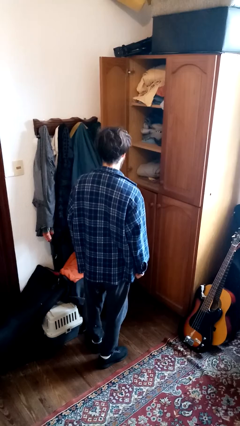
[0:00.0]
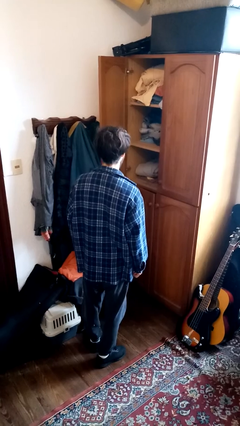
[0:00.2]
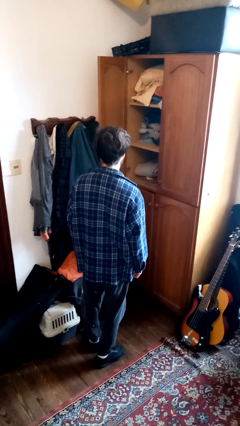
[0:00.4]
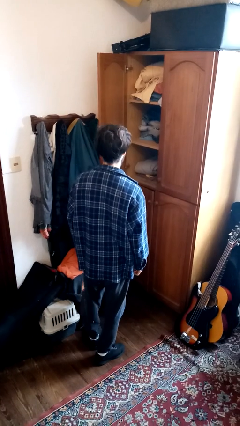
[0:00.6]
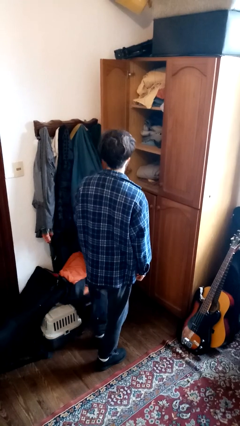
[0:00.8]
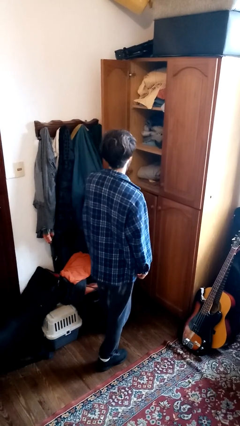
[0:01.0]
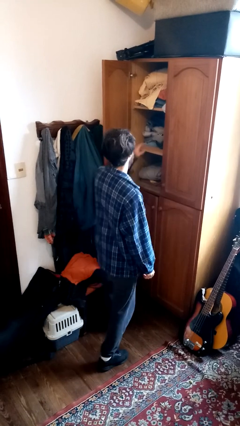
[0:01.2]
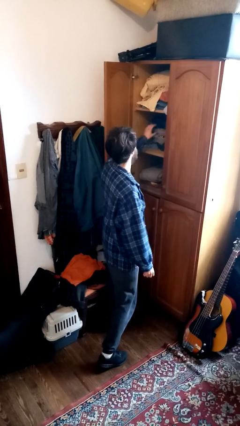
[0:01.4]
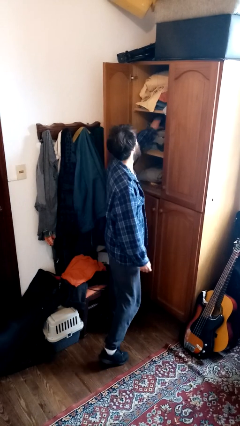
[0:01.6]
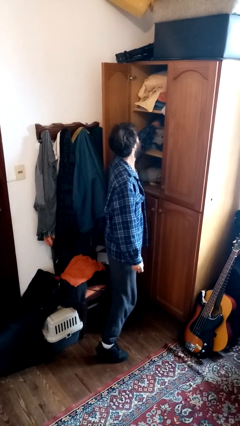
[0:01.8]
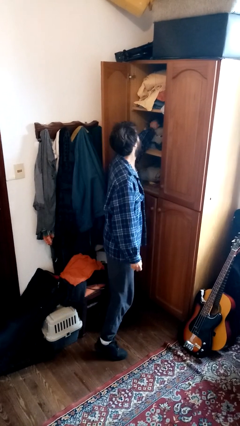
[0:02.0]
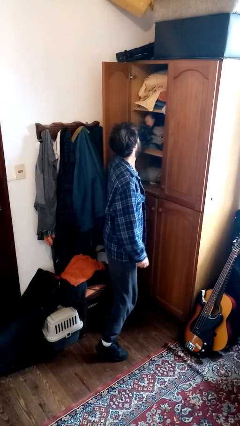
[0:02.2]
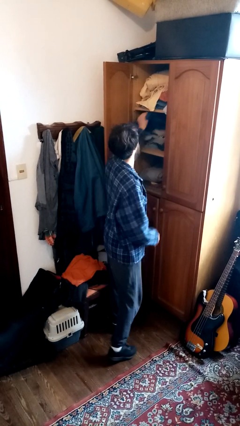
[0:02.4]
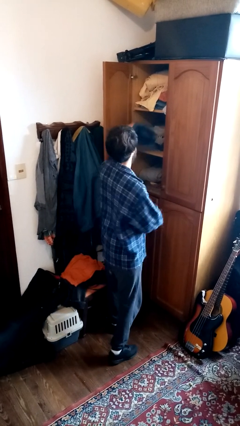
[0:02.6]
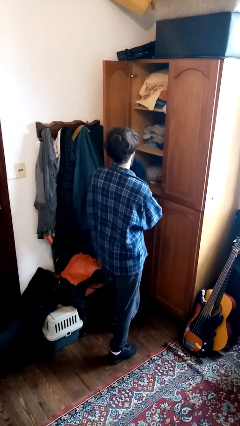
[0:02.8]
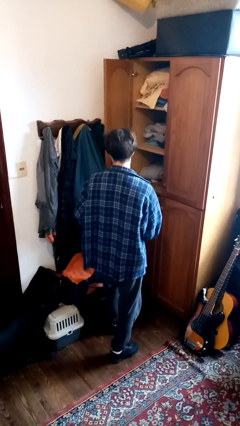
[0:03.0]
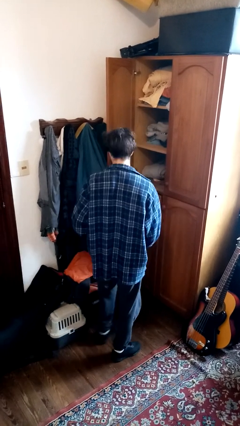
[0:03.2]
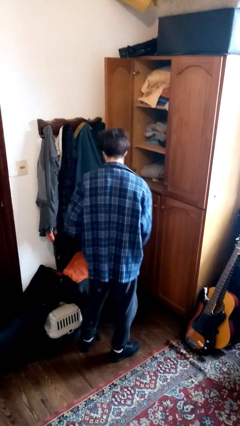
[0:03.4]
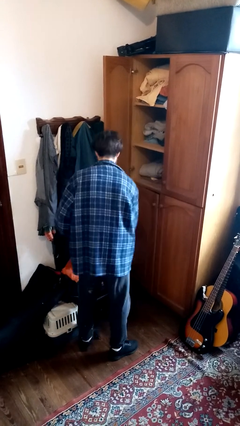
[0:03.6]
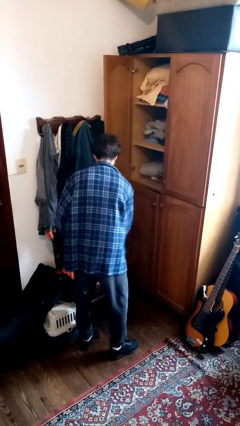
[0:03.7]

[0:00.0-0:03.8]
person takes clothes from dresser

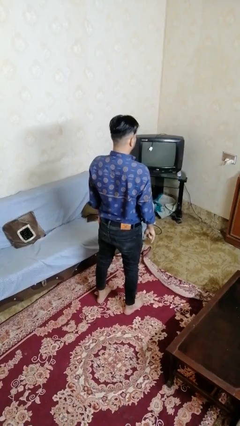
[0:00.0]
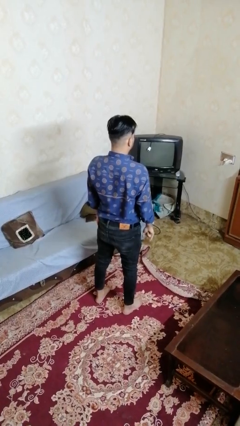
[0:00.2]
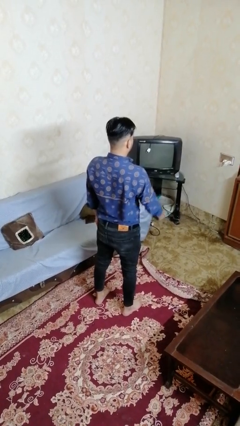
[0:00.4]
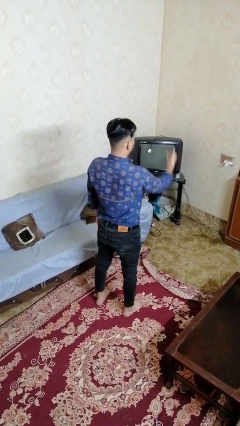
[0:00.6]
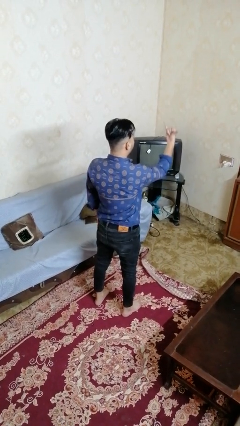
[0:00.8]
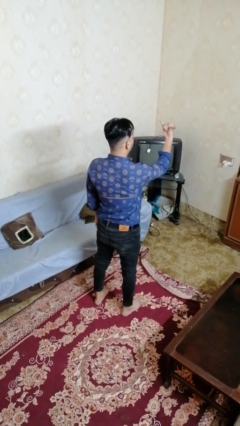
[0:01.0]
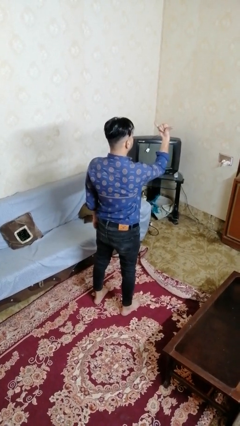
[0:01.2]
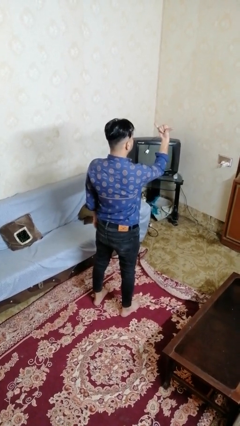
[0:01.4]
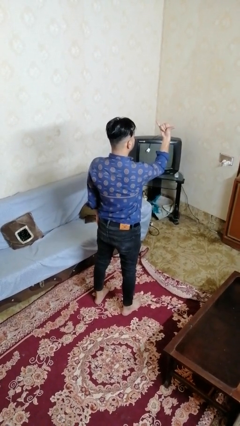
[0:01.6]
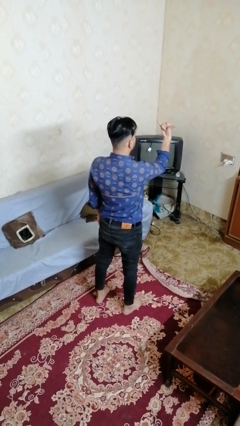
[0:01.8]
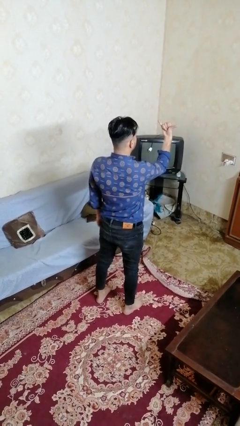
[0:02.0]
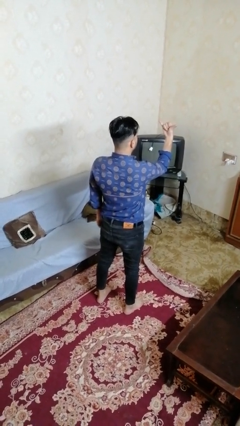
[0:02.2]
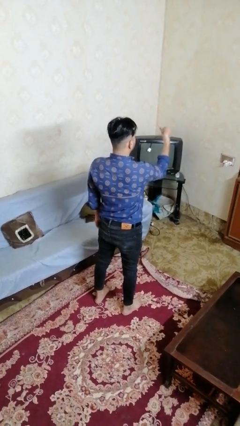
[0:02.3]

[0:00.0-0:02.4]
person gestures hang loose

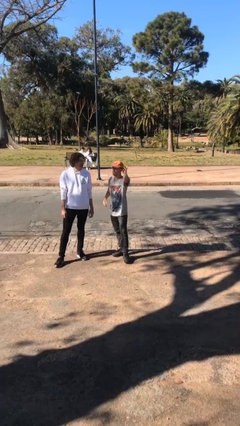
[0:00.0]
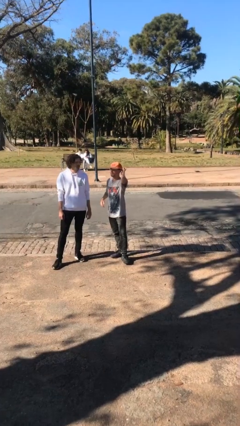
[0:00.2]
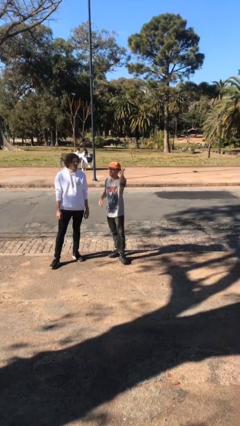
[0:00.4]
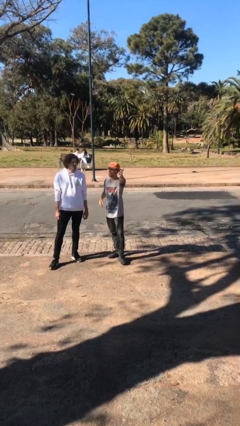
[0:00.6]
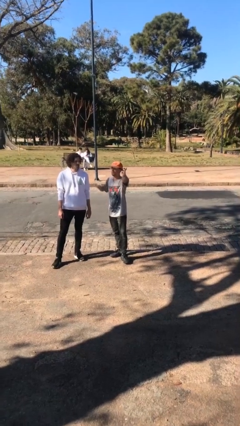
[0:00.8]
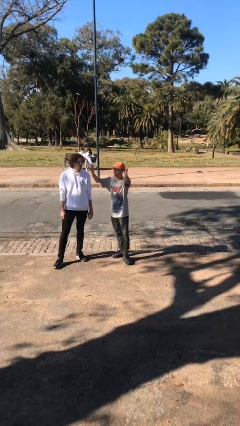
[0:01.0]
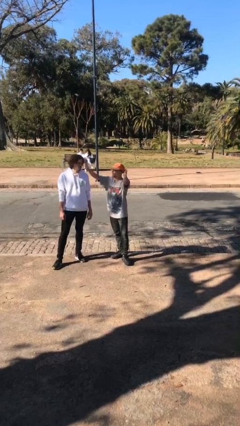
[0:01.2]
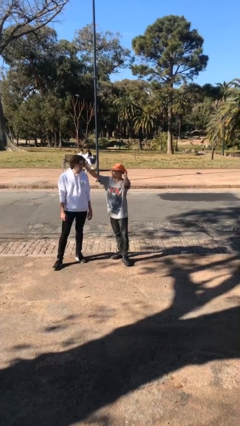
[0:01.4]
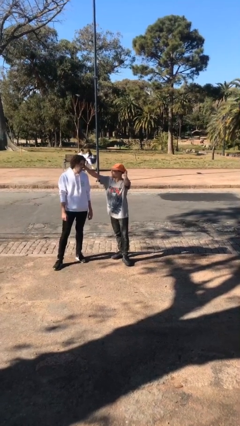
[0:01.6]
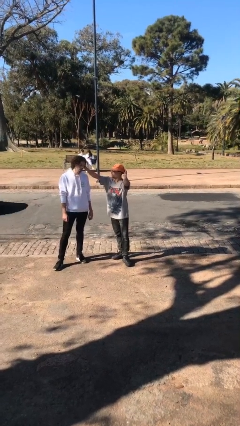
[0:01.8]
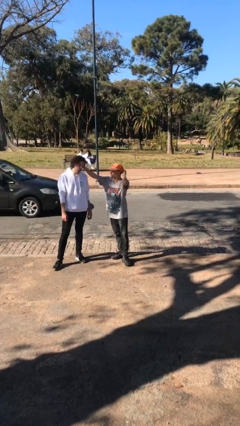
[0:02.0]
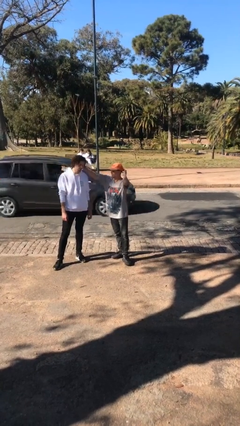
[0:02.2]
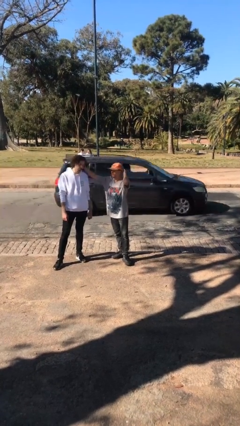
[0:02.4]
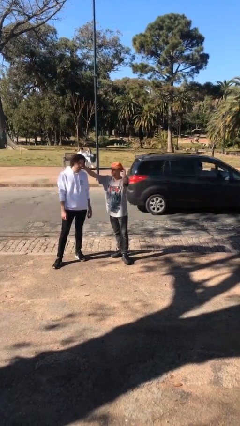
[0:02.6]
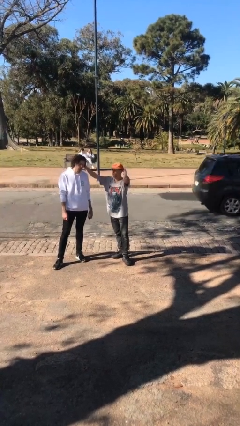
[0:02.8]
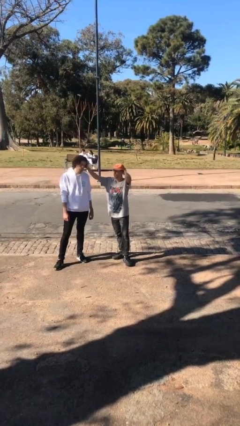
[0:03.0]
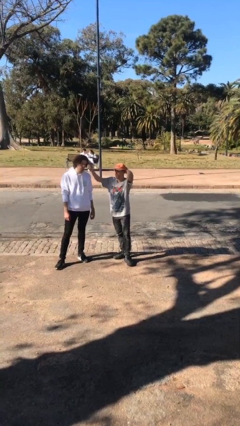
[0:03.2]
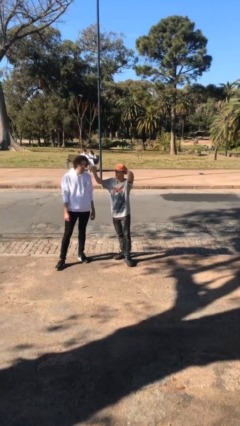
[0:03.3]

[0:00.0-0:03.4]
person grabs person by hair

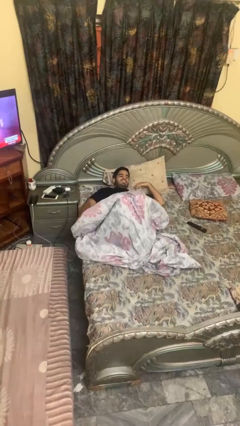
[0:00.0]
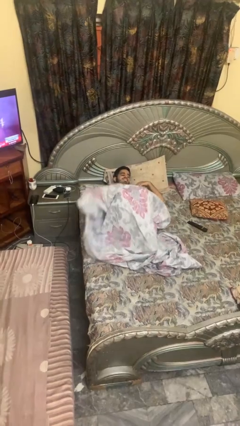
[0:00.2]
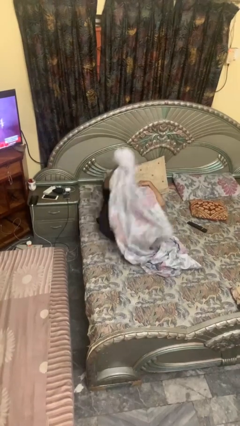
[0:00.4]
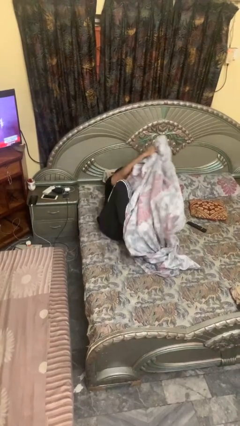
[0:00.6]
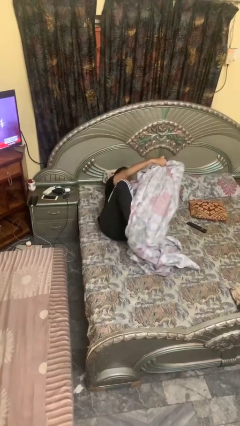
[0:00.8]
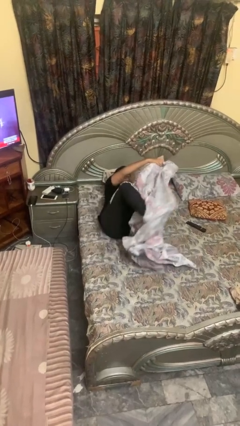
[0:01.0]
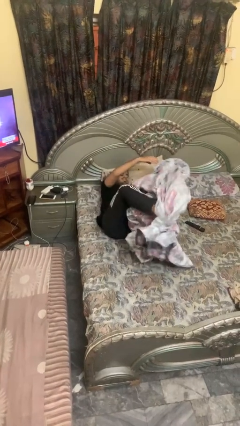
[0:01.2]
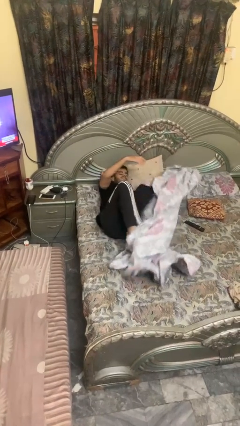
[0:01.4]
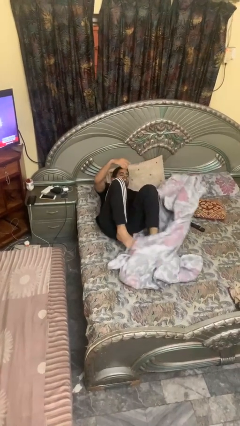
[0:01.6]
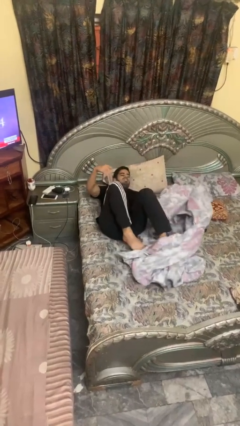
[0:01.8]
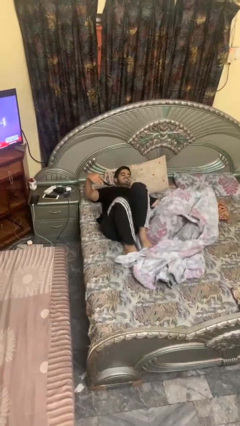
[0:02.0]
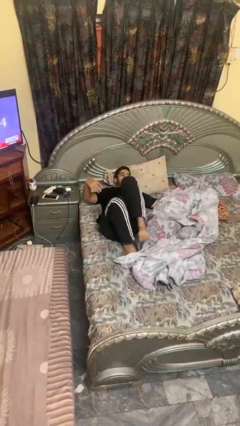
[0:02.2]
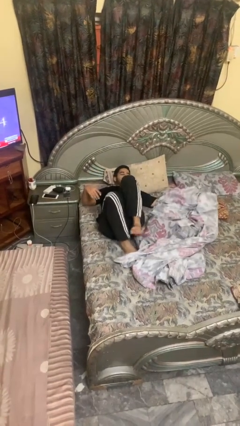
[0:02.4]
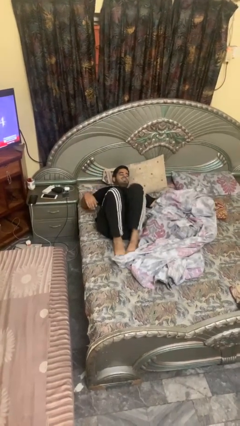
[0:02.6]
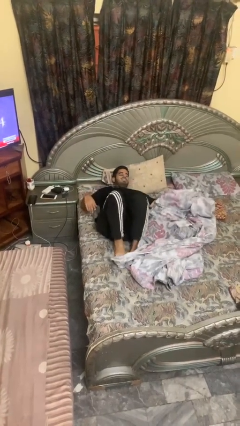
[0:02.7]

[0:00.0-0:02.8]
person uncovers with bedsheets

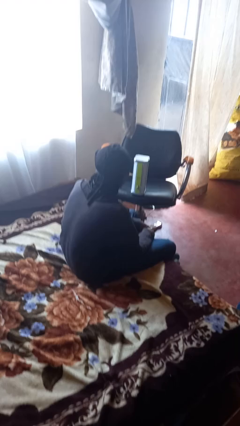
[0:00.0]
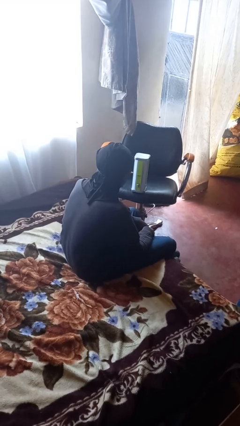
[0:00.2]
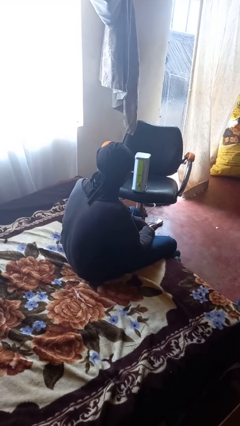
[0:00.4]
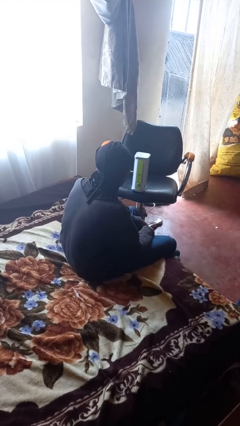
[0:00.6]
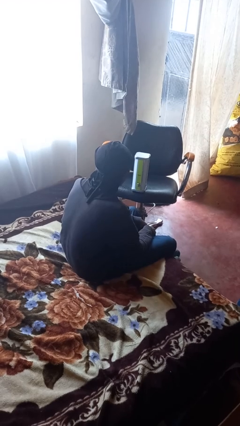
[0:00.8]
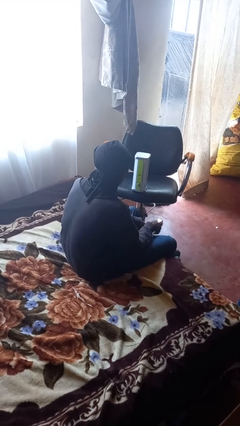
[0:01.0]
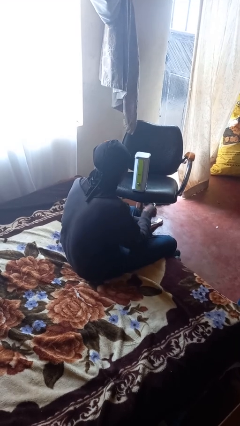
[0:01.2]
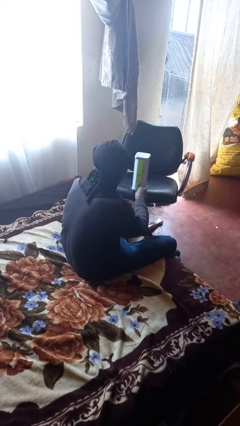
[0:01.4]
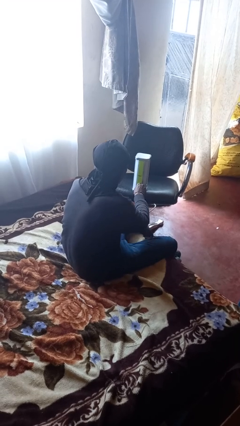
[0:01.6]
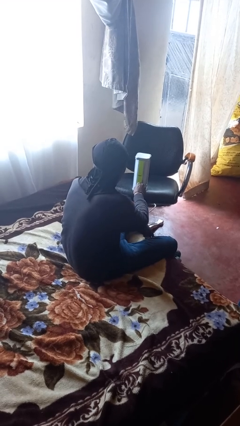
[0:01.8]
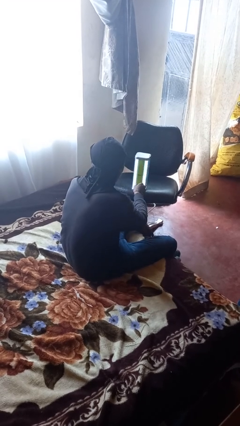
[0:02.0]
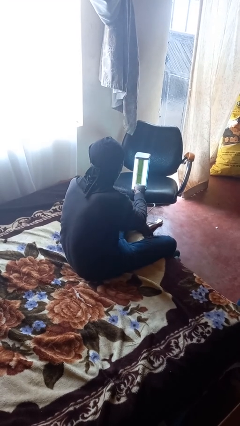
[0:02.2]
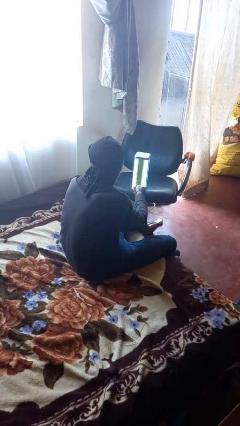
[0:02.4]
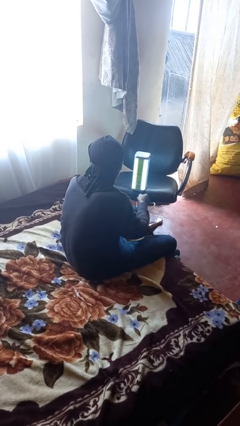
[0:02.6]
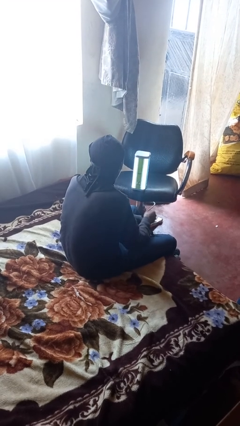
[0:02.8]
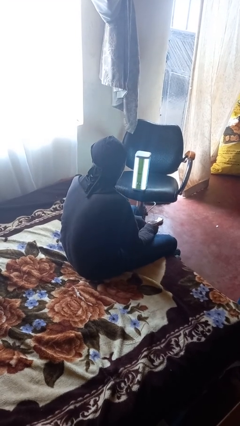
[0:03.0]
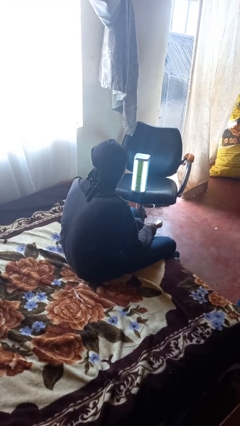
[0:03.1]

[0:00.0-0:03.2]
person turns on lamp

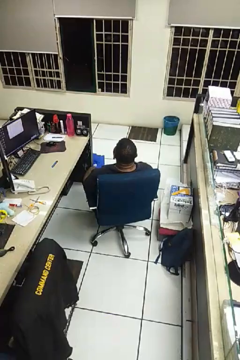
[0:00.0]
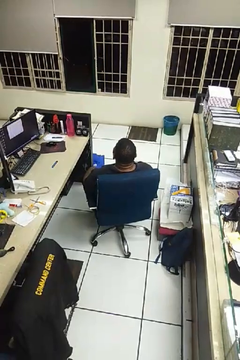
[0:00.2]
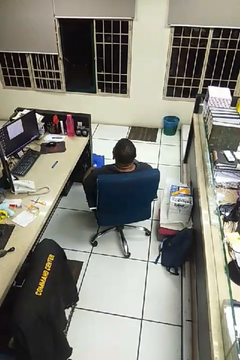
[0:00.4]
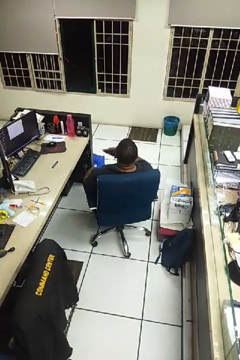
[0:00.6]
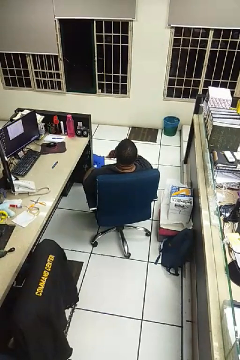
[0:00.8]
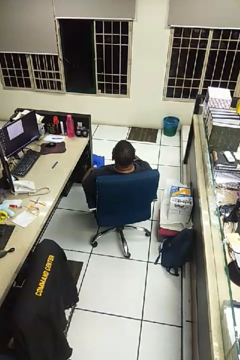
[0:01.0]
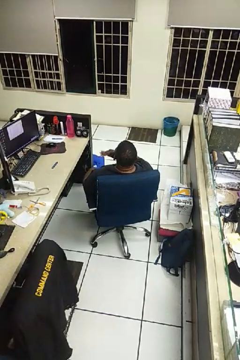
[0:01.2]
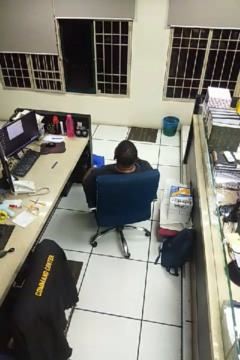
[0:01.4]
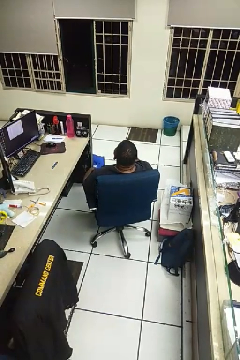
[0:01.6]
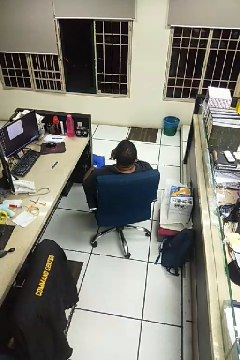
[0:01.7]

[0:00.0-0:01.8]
person gestures cut
